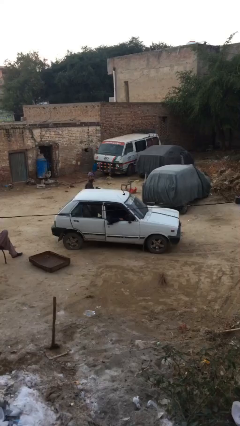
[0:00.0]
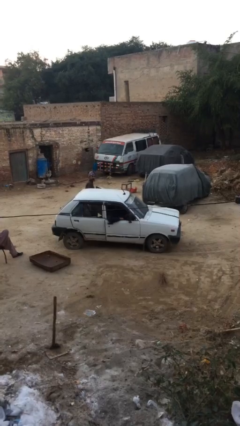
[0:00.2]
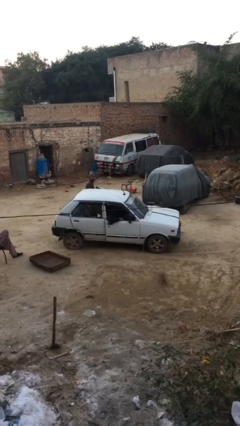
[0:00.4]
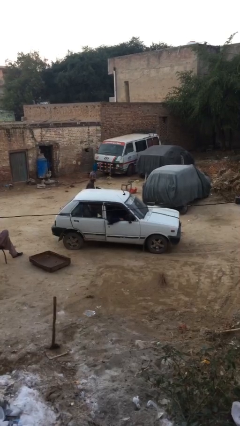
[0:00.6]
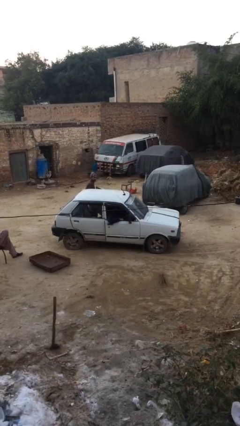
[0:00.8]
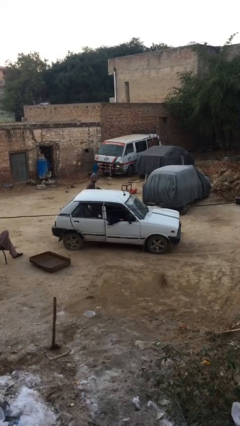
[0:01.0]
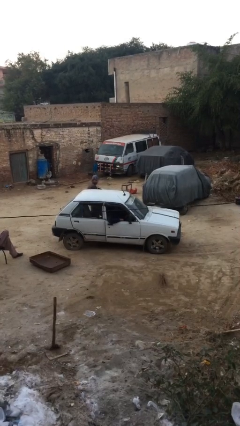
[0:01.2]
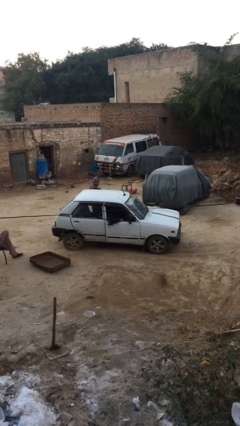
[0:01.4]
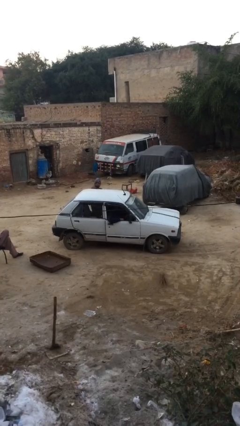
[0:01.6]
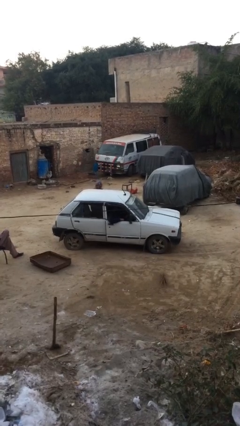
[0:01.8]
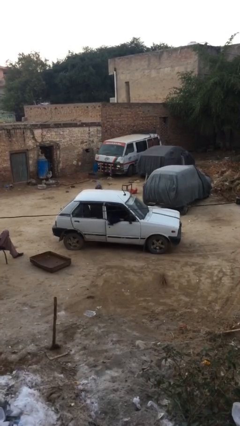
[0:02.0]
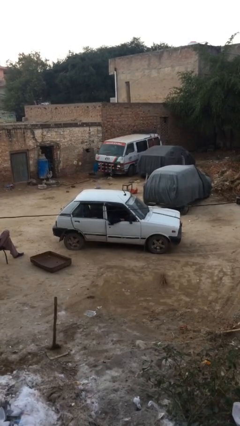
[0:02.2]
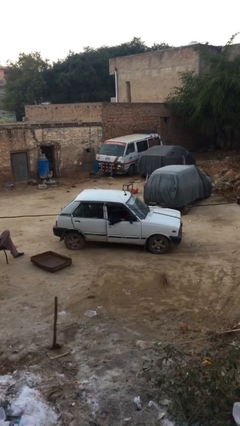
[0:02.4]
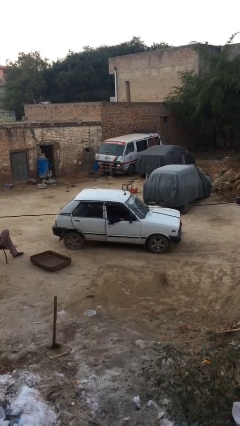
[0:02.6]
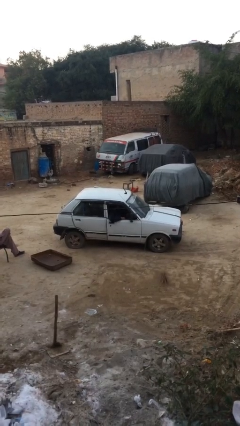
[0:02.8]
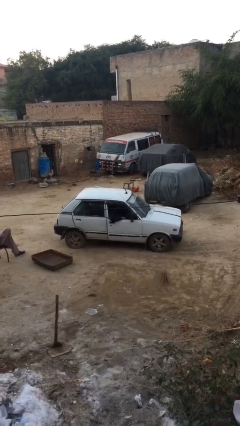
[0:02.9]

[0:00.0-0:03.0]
car picks up person

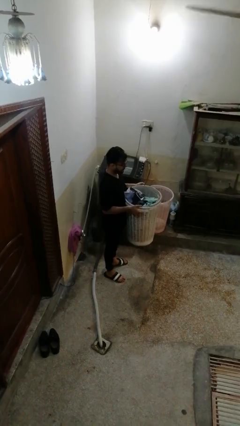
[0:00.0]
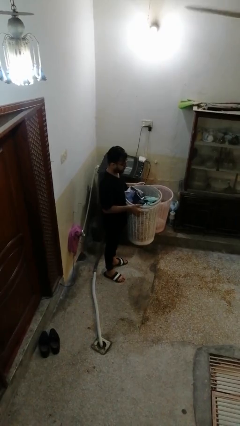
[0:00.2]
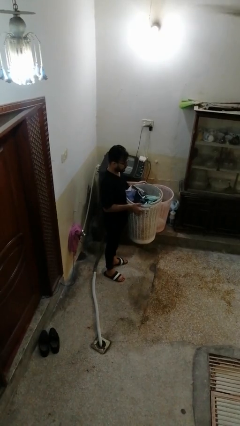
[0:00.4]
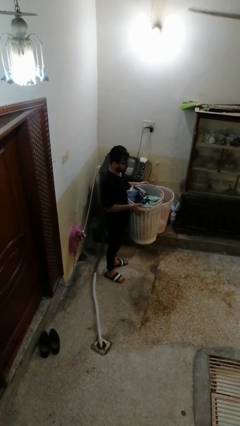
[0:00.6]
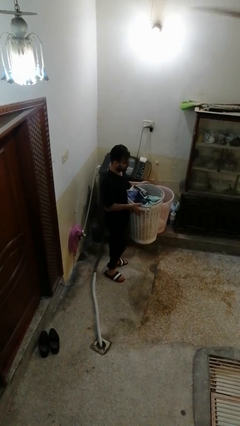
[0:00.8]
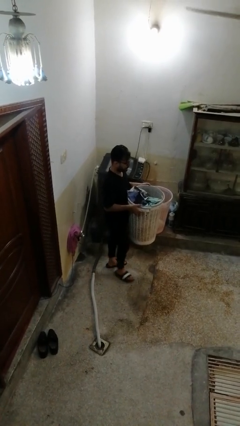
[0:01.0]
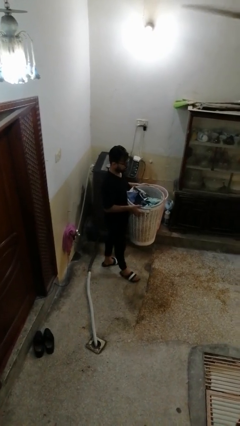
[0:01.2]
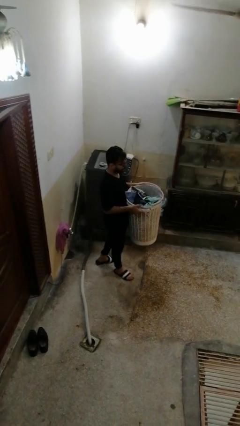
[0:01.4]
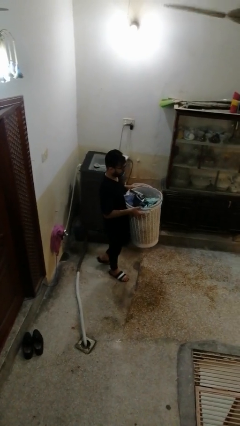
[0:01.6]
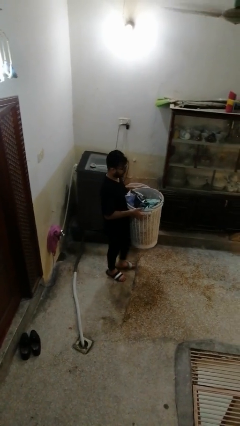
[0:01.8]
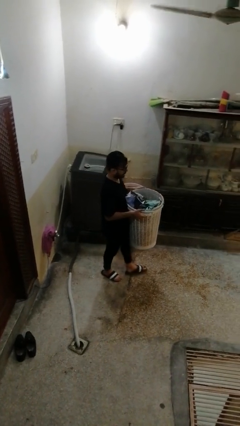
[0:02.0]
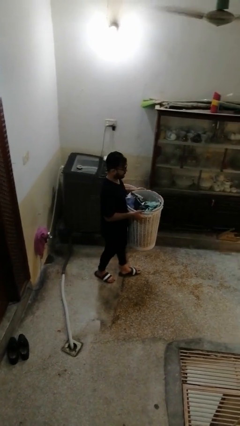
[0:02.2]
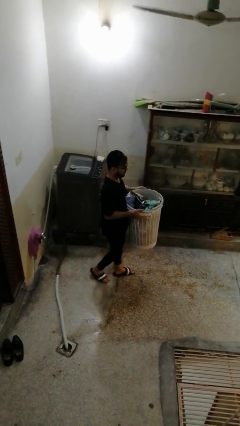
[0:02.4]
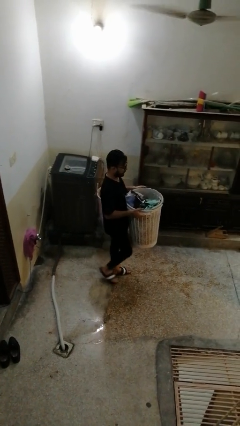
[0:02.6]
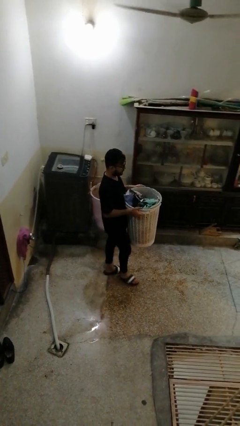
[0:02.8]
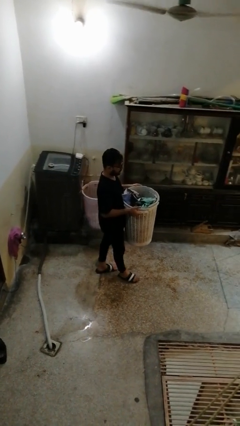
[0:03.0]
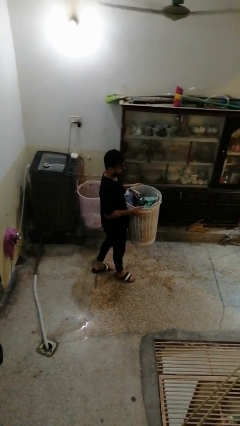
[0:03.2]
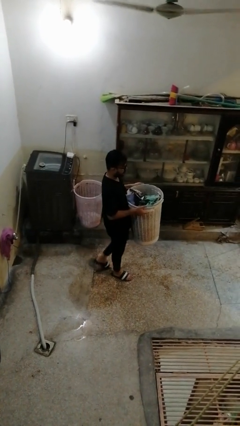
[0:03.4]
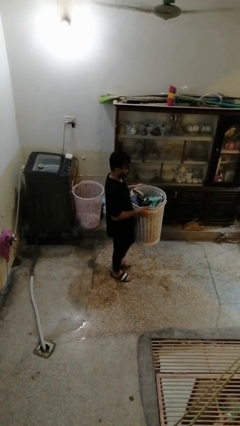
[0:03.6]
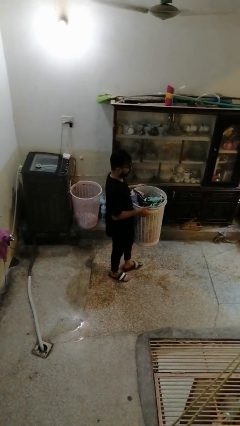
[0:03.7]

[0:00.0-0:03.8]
person carries laundry basket

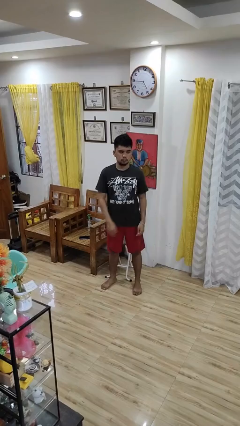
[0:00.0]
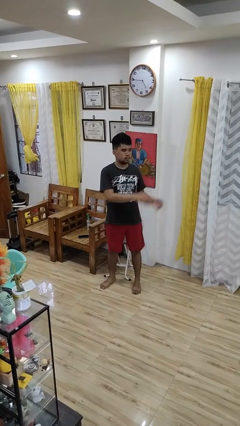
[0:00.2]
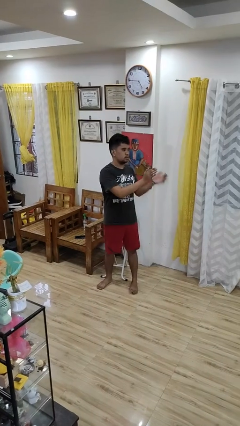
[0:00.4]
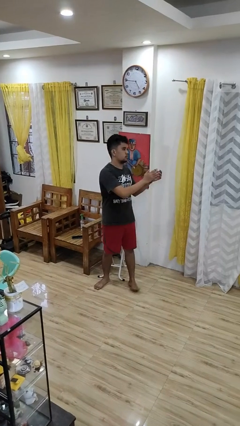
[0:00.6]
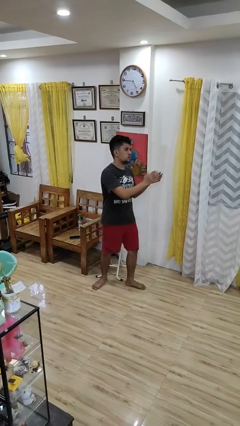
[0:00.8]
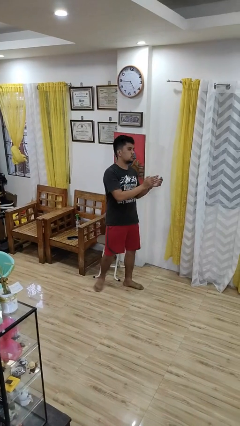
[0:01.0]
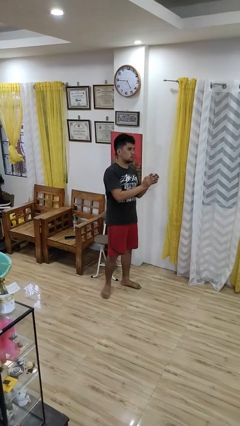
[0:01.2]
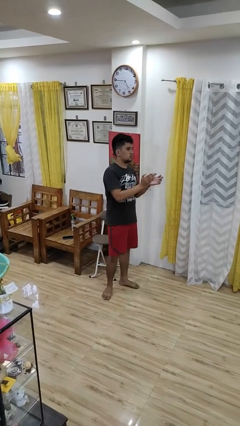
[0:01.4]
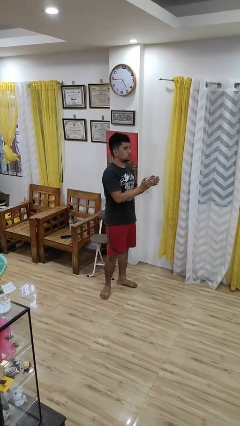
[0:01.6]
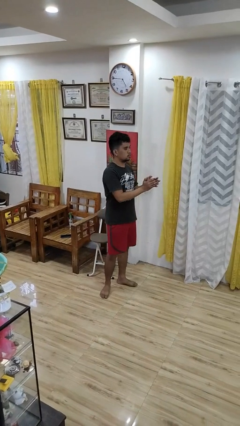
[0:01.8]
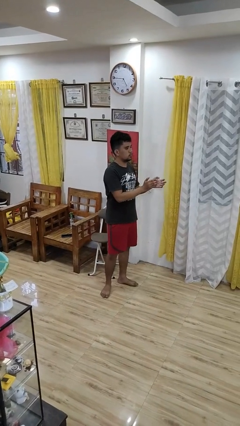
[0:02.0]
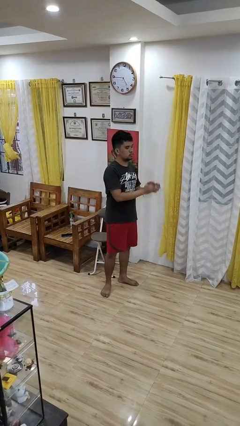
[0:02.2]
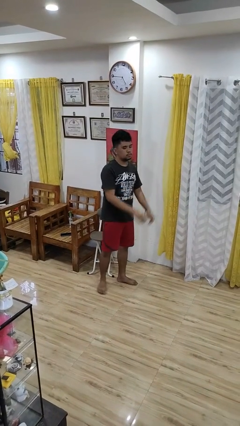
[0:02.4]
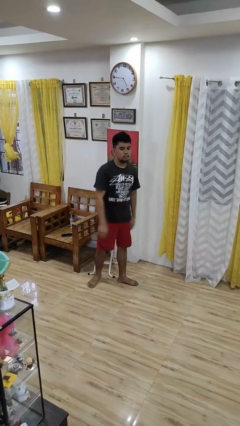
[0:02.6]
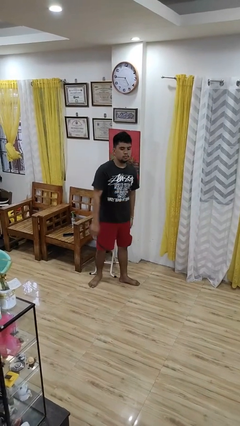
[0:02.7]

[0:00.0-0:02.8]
person claps hands

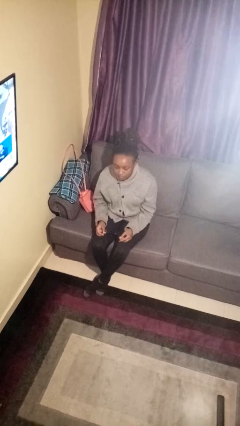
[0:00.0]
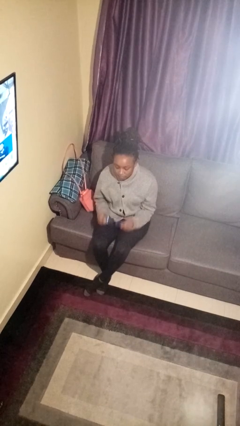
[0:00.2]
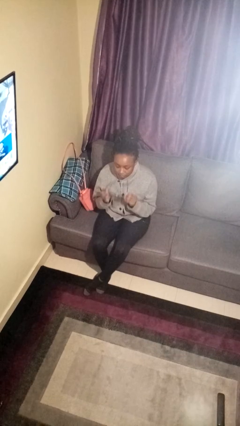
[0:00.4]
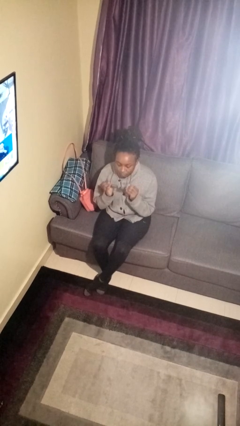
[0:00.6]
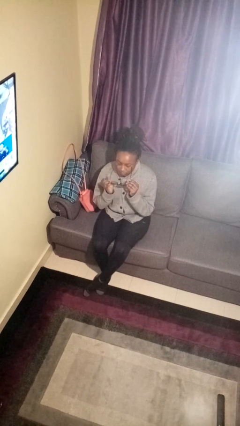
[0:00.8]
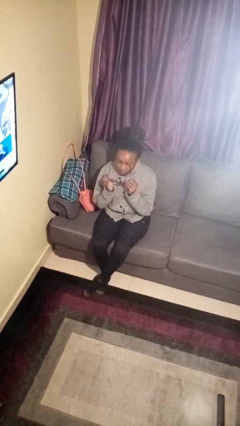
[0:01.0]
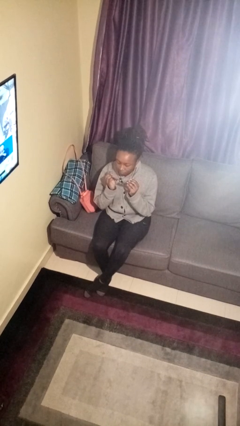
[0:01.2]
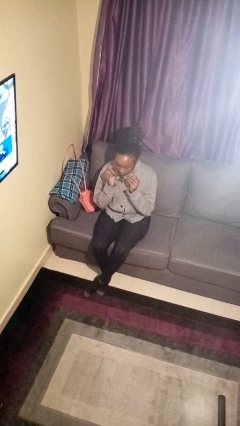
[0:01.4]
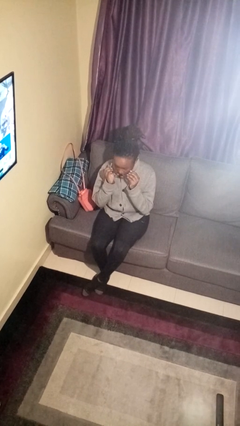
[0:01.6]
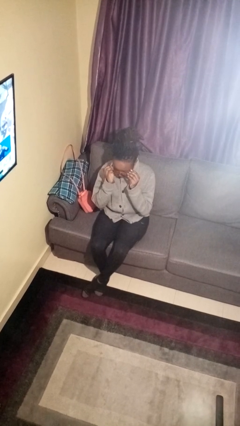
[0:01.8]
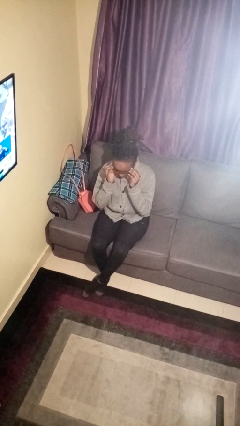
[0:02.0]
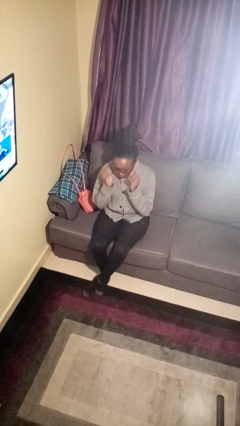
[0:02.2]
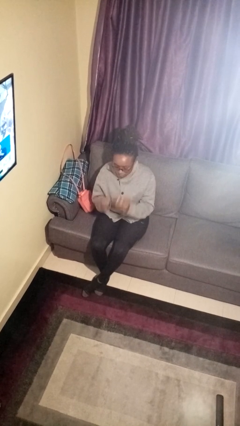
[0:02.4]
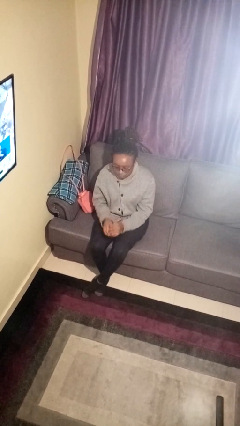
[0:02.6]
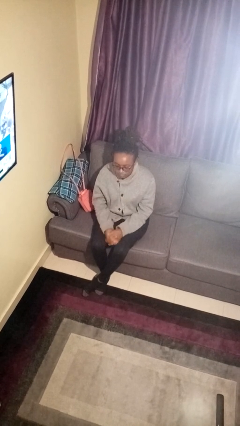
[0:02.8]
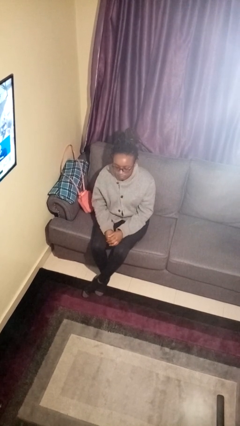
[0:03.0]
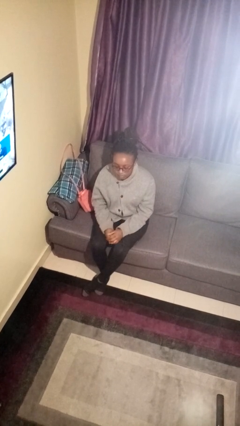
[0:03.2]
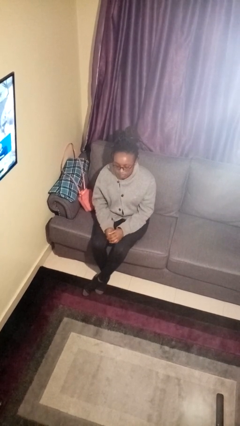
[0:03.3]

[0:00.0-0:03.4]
person puts on glasses

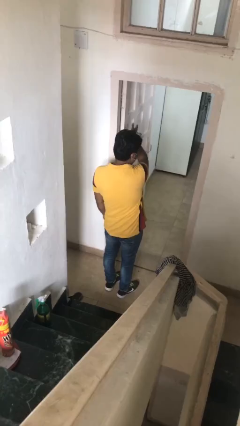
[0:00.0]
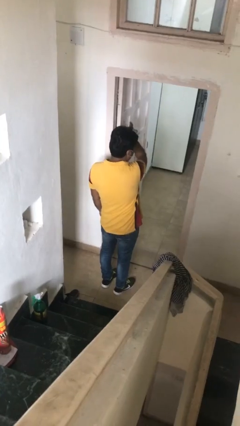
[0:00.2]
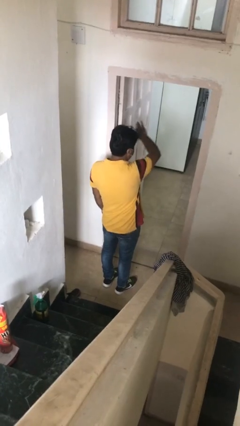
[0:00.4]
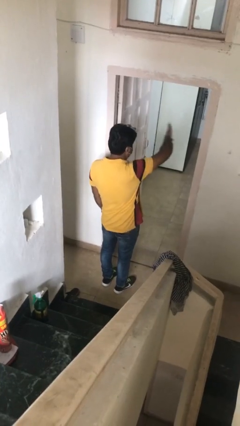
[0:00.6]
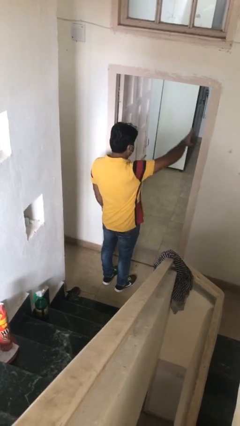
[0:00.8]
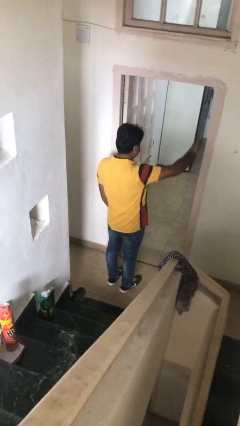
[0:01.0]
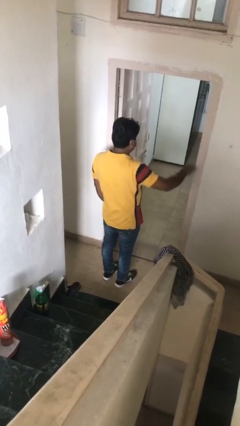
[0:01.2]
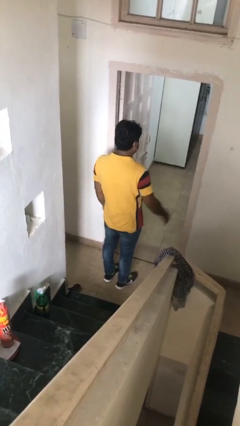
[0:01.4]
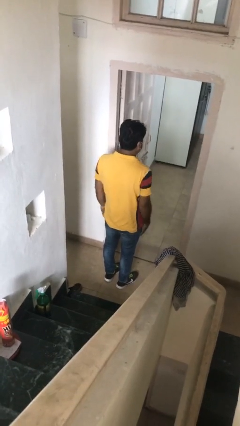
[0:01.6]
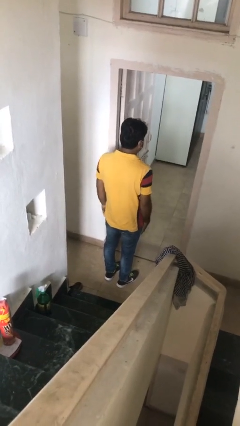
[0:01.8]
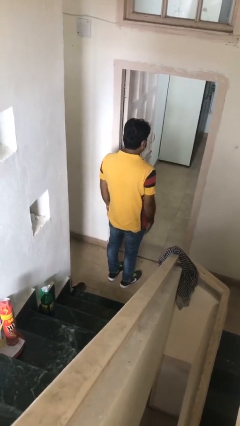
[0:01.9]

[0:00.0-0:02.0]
person gestures swipe right

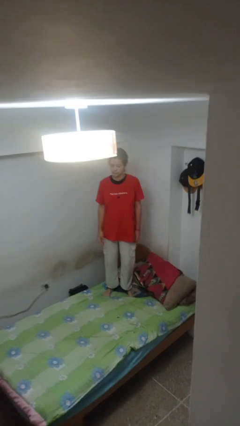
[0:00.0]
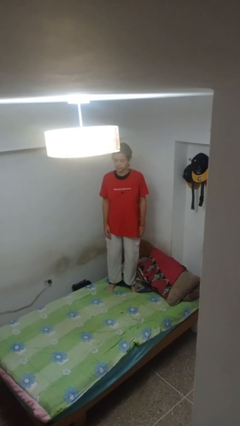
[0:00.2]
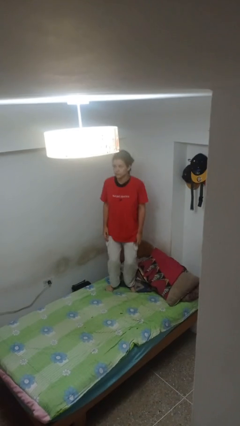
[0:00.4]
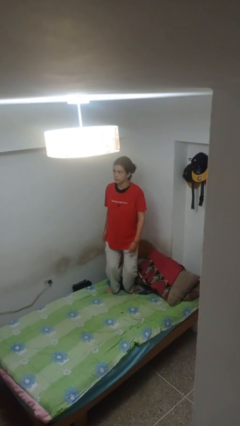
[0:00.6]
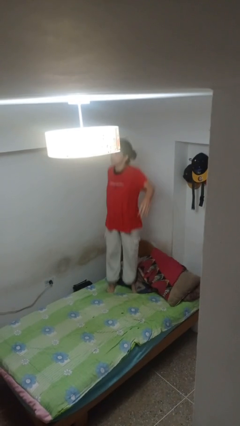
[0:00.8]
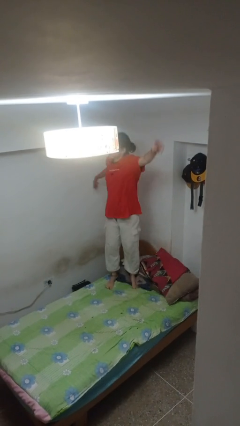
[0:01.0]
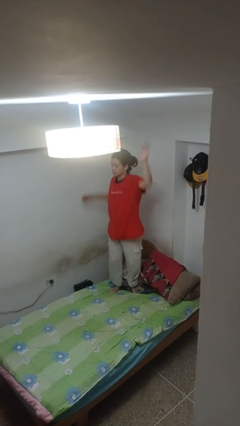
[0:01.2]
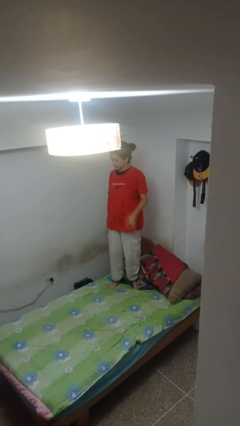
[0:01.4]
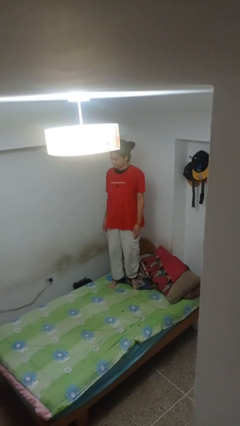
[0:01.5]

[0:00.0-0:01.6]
person jumps on bed

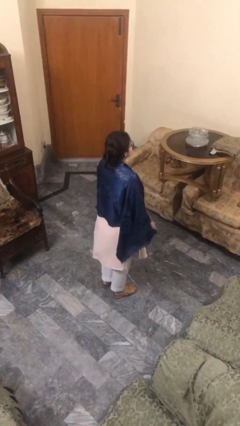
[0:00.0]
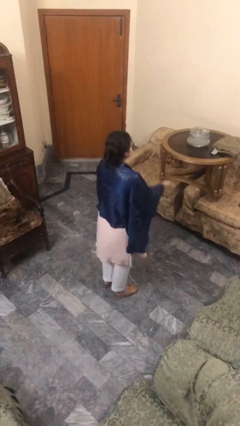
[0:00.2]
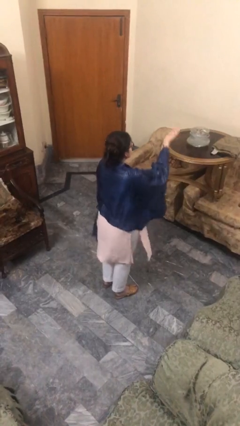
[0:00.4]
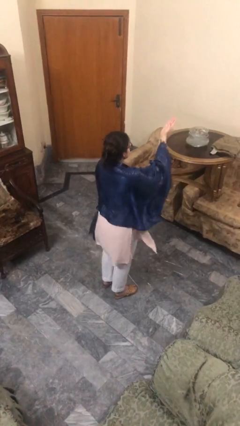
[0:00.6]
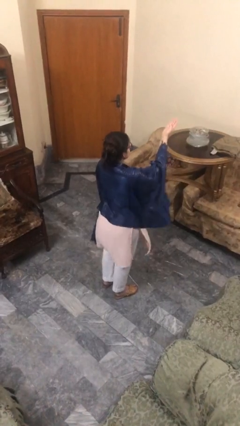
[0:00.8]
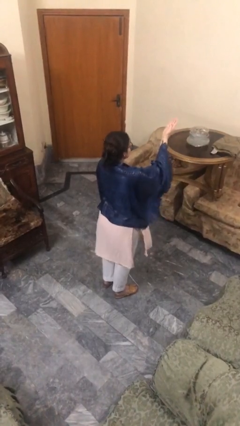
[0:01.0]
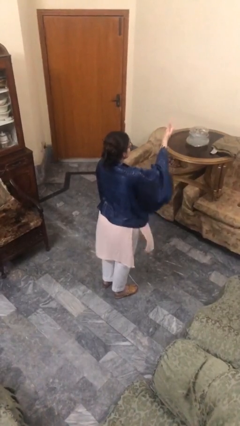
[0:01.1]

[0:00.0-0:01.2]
person gestures swipe up
